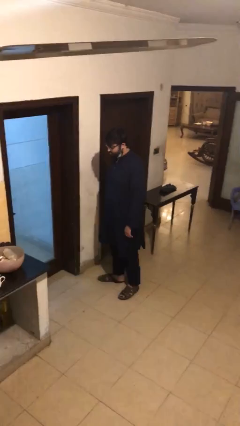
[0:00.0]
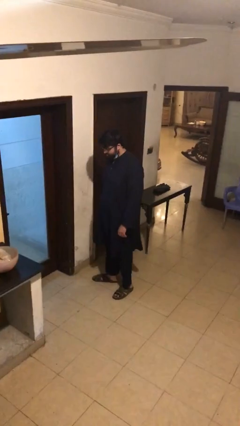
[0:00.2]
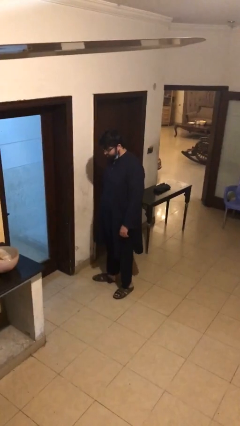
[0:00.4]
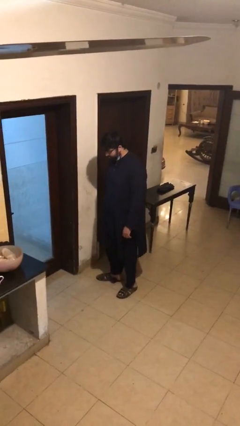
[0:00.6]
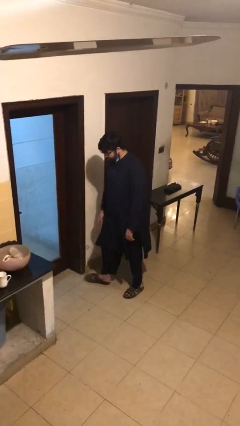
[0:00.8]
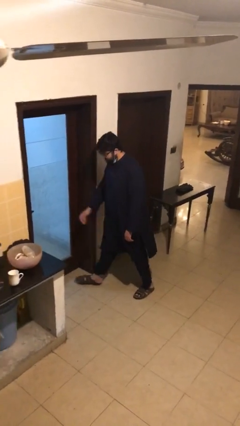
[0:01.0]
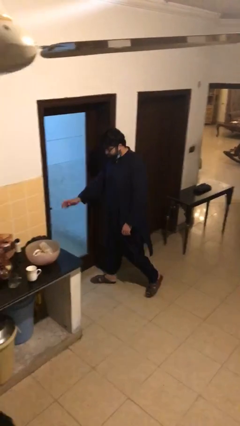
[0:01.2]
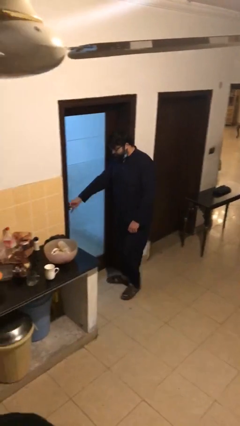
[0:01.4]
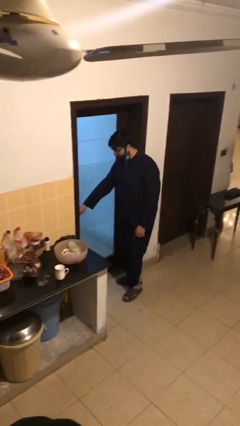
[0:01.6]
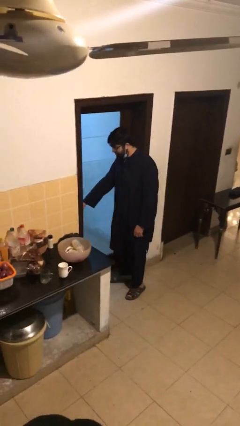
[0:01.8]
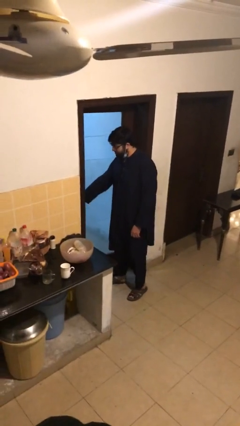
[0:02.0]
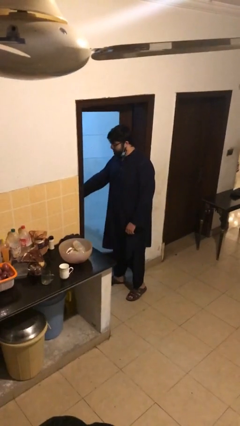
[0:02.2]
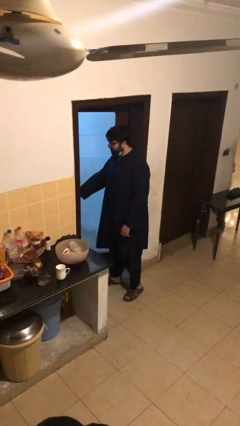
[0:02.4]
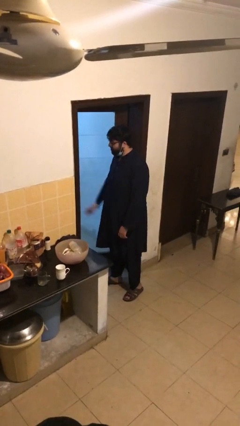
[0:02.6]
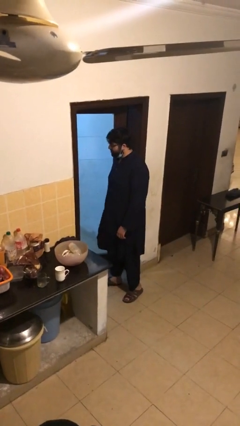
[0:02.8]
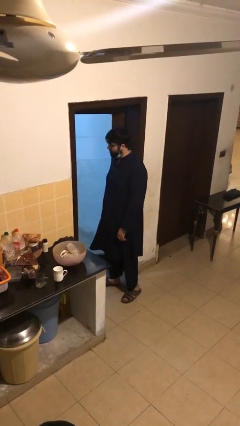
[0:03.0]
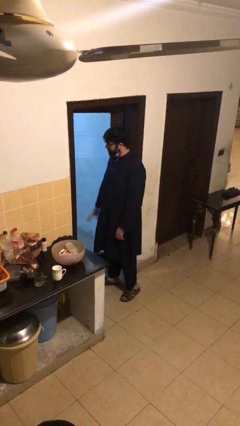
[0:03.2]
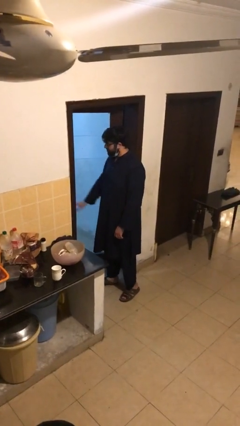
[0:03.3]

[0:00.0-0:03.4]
person opens facility door

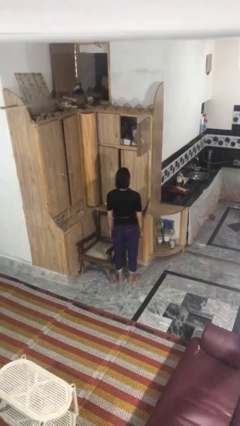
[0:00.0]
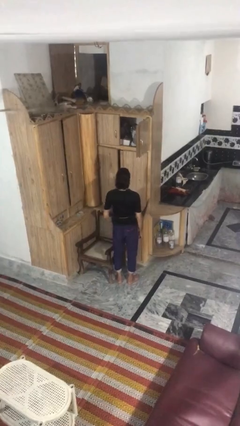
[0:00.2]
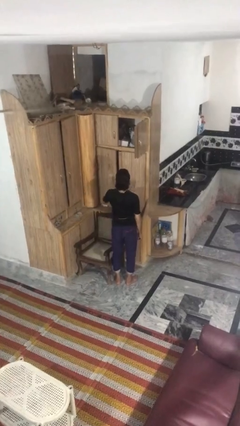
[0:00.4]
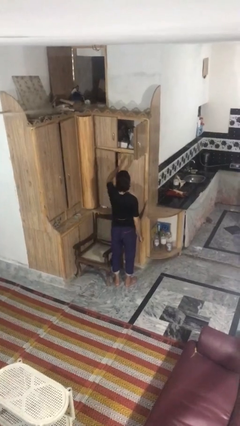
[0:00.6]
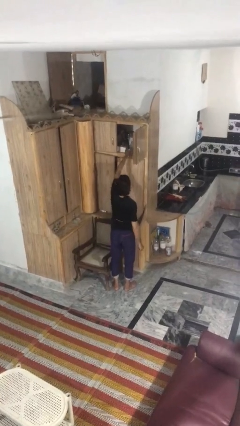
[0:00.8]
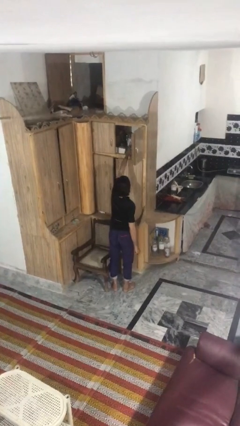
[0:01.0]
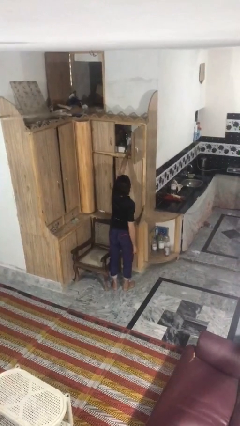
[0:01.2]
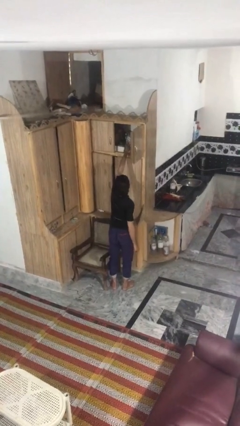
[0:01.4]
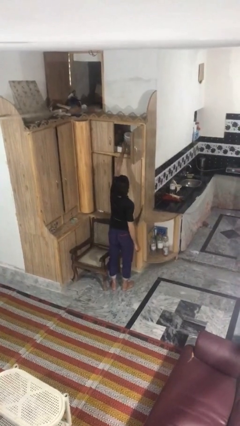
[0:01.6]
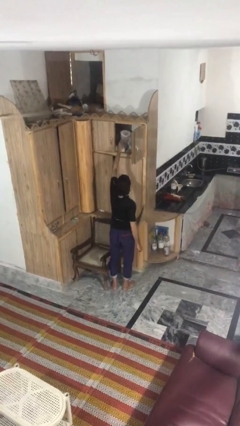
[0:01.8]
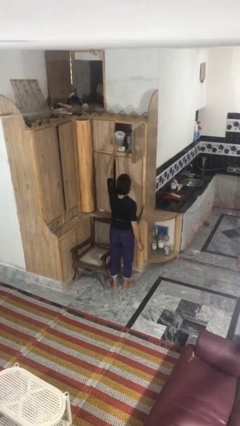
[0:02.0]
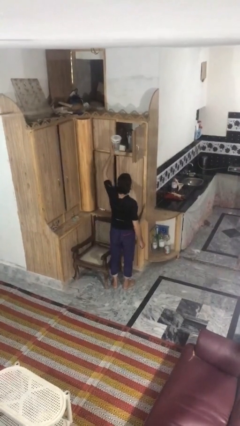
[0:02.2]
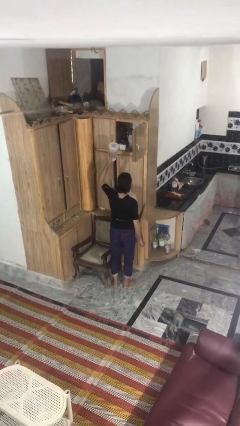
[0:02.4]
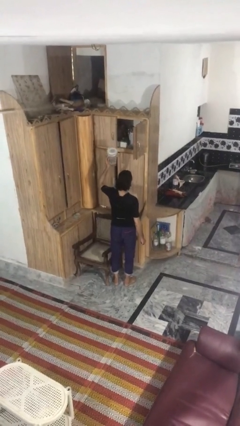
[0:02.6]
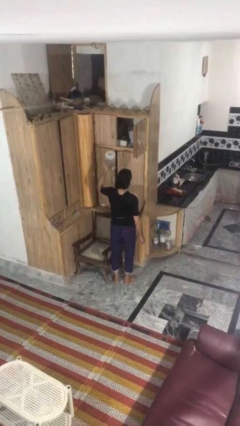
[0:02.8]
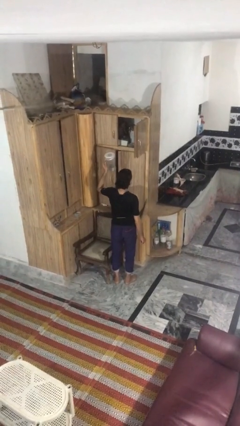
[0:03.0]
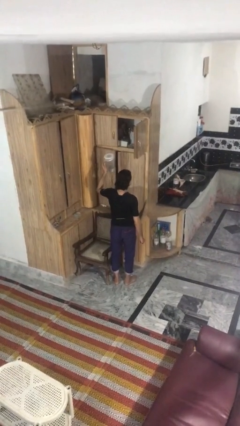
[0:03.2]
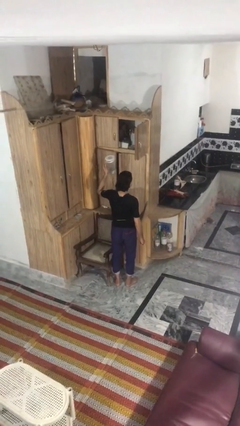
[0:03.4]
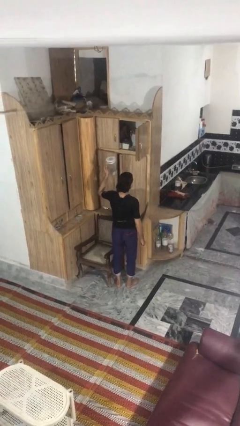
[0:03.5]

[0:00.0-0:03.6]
person picks up object from shelf

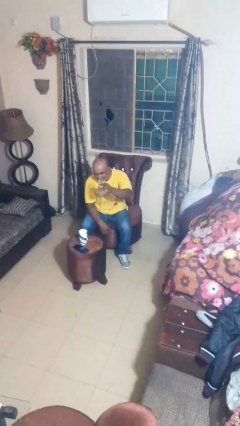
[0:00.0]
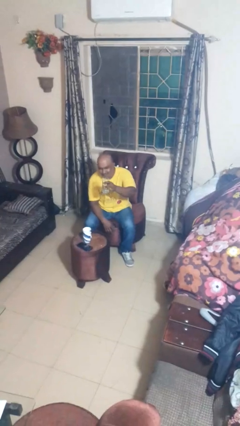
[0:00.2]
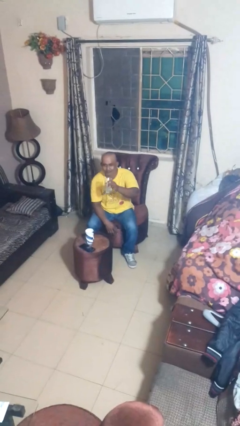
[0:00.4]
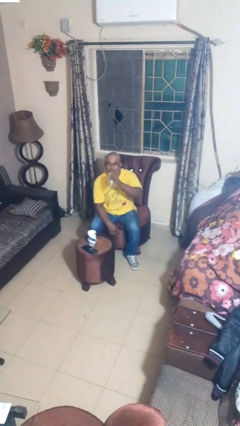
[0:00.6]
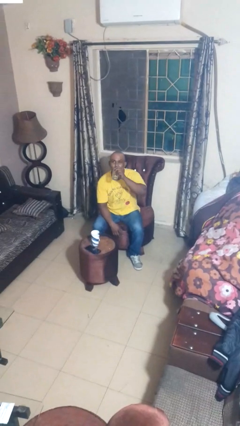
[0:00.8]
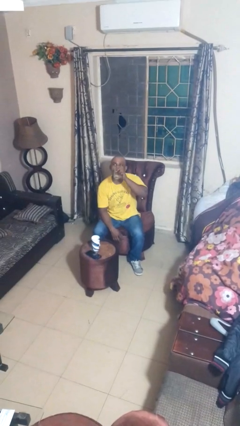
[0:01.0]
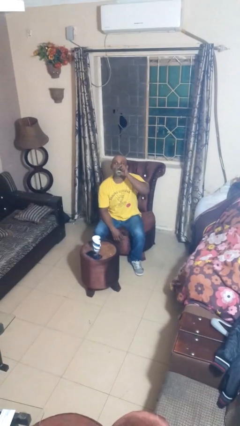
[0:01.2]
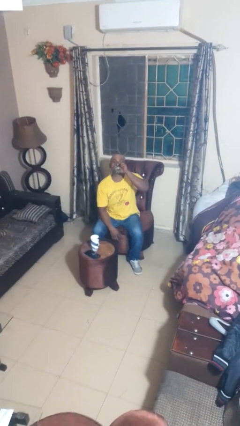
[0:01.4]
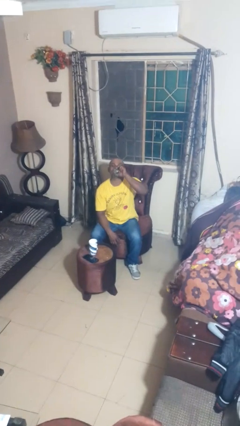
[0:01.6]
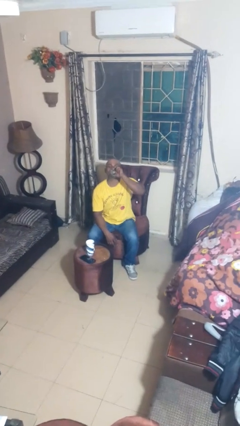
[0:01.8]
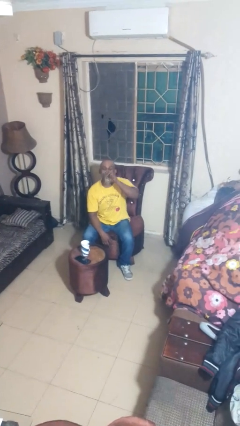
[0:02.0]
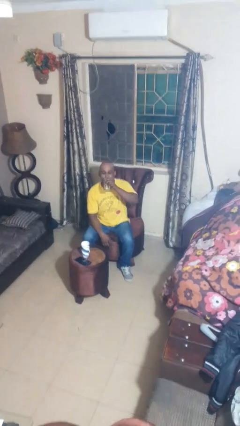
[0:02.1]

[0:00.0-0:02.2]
person drinks from shotglass

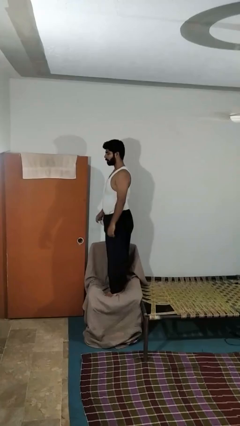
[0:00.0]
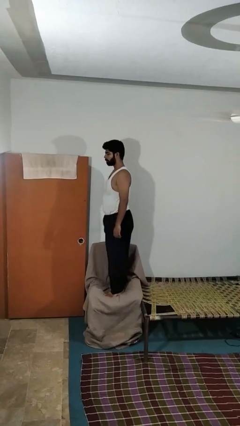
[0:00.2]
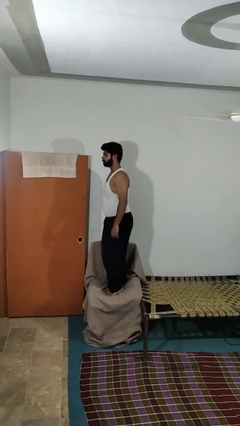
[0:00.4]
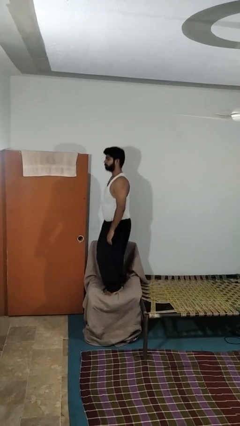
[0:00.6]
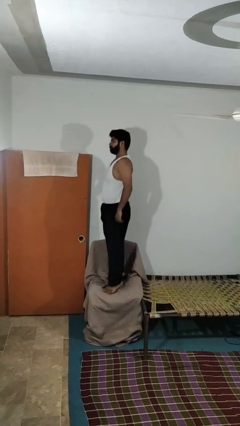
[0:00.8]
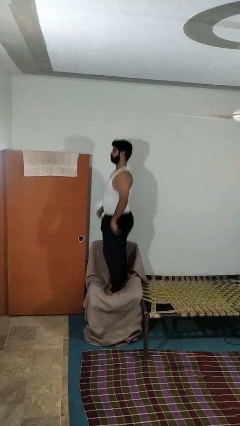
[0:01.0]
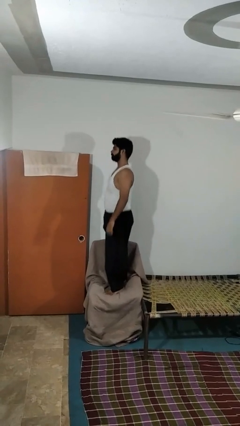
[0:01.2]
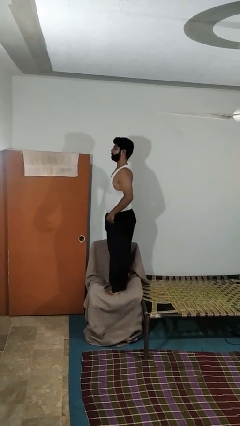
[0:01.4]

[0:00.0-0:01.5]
person jumps on couch

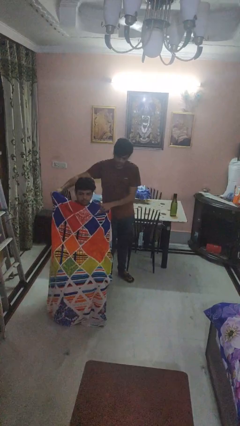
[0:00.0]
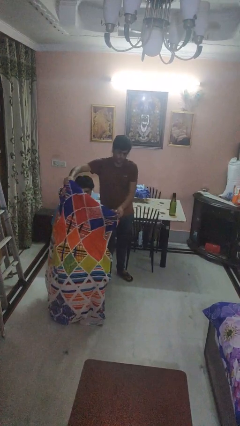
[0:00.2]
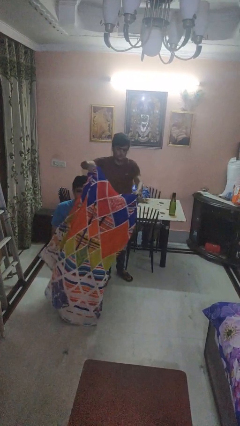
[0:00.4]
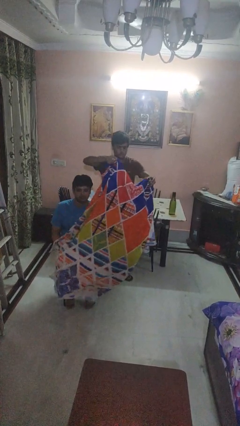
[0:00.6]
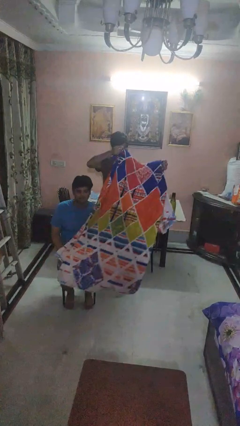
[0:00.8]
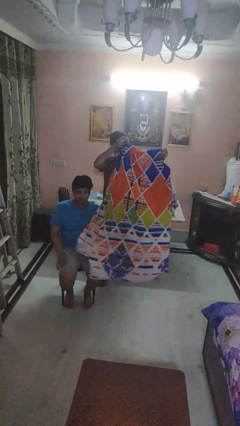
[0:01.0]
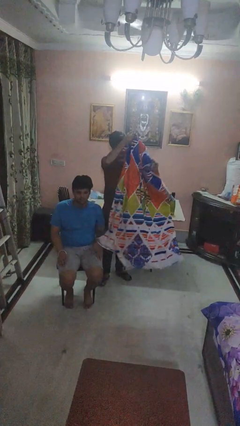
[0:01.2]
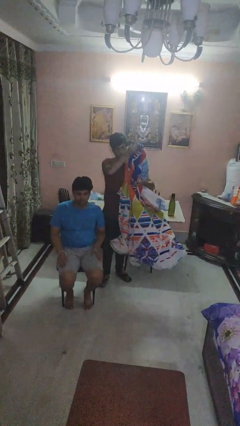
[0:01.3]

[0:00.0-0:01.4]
person uncovers friend with blanket

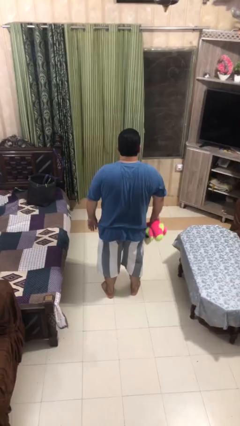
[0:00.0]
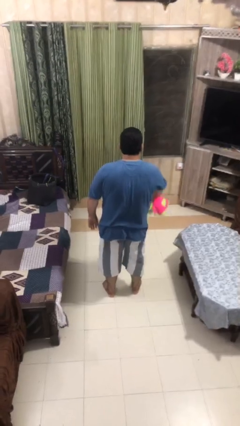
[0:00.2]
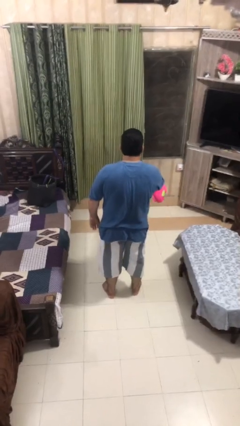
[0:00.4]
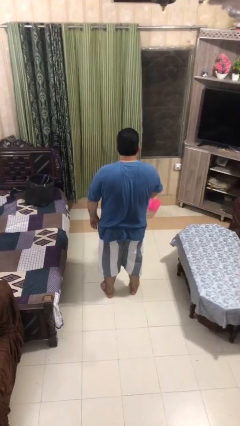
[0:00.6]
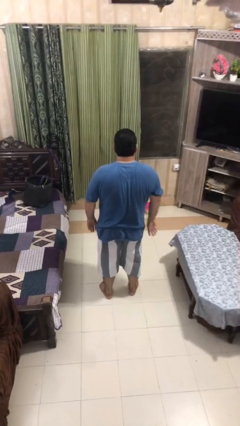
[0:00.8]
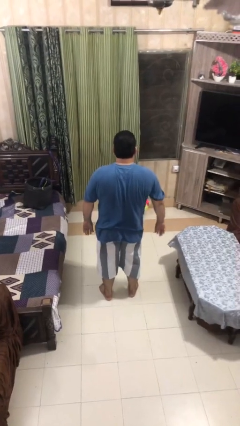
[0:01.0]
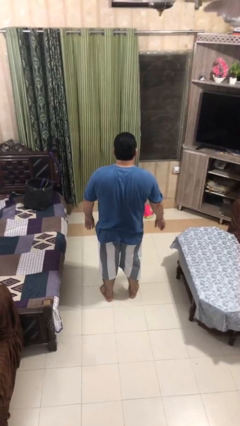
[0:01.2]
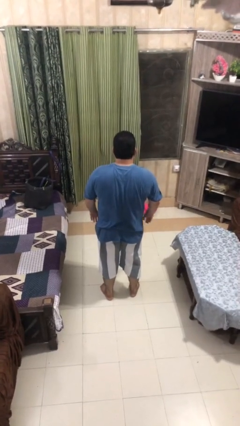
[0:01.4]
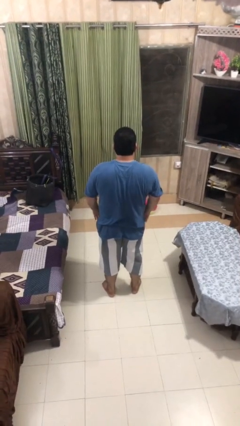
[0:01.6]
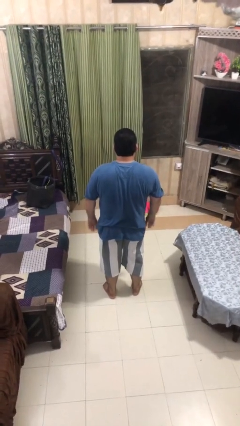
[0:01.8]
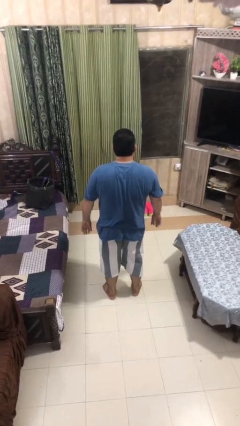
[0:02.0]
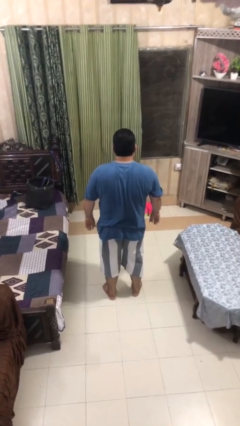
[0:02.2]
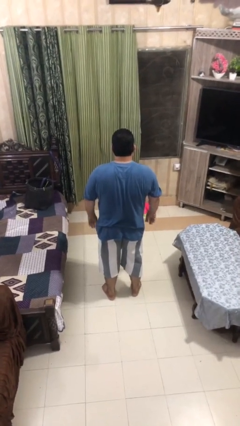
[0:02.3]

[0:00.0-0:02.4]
person throws object to ground

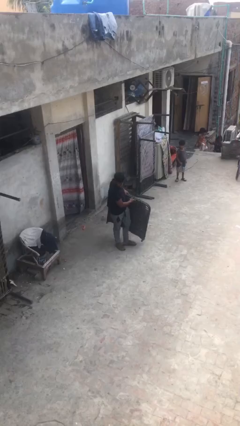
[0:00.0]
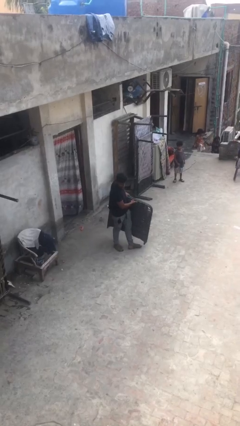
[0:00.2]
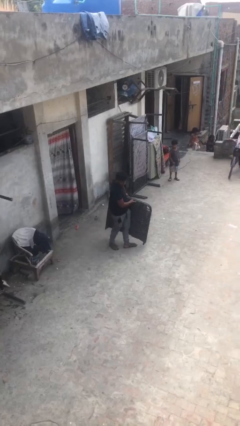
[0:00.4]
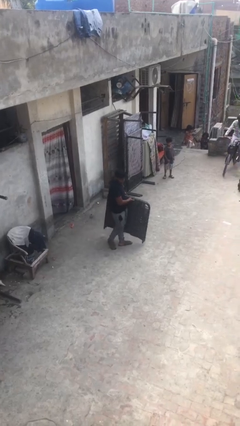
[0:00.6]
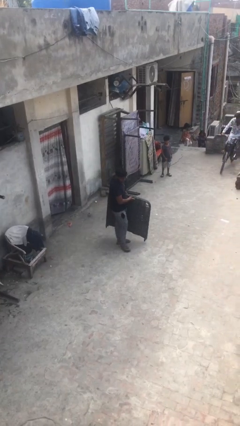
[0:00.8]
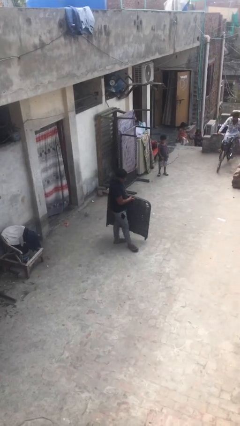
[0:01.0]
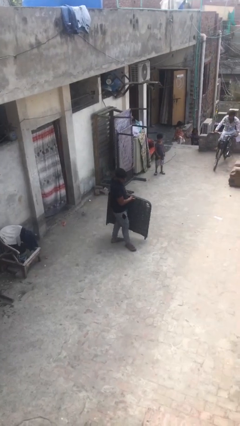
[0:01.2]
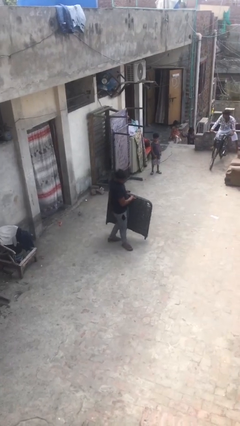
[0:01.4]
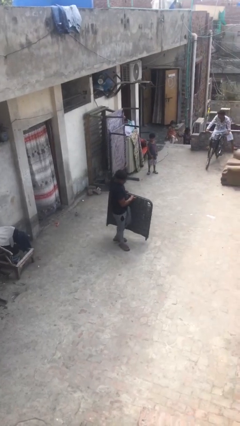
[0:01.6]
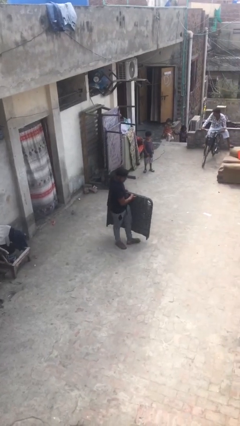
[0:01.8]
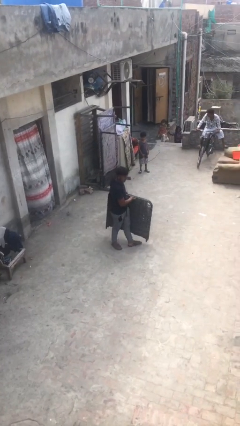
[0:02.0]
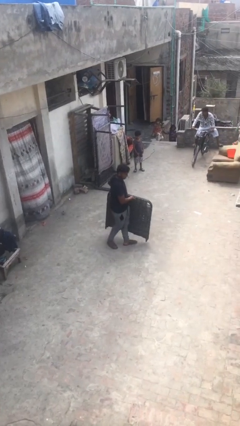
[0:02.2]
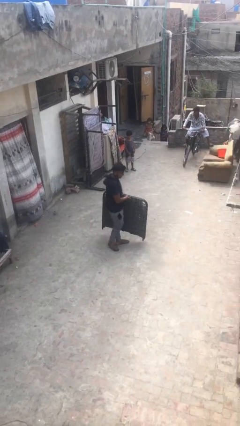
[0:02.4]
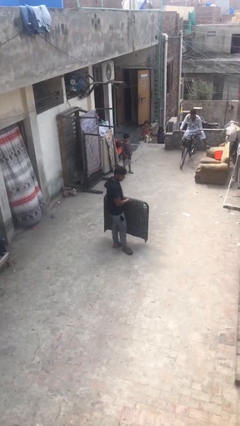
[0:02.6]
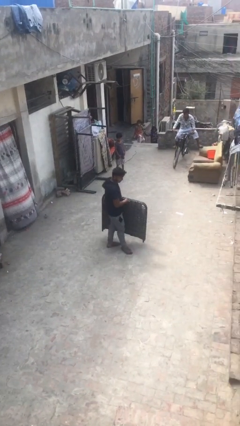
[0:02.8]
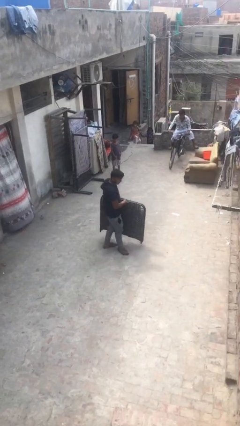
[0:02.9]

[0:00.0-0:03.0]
person carries heavy object
